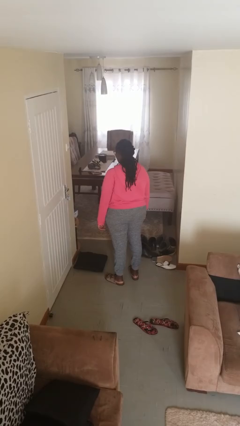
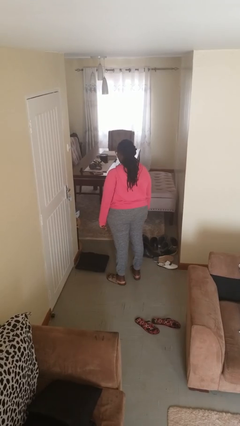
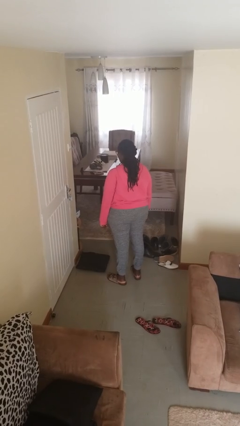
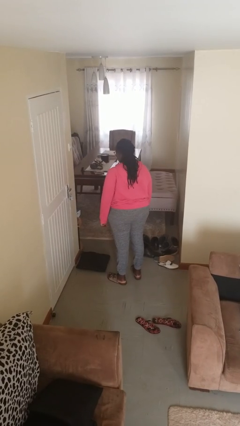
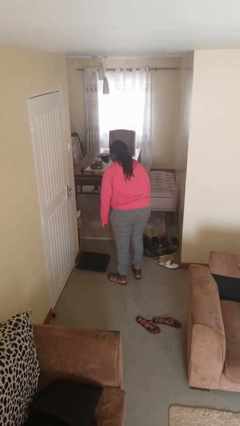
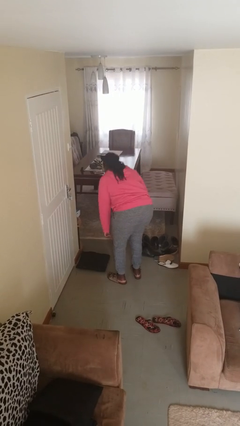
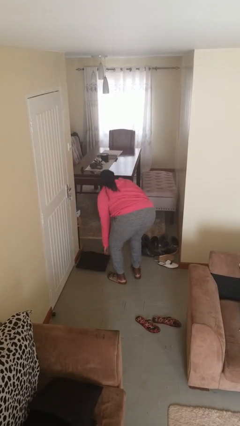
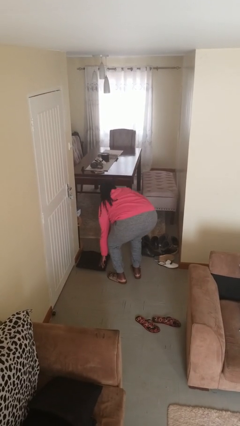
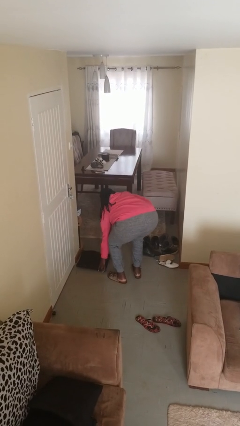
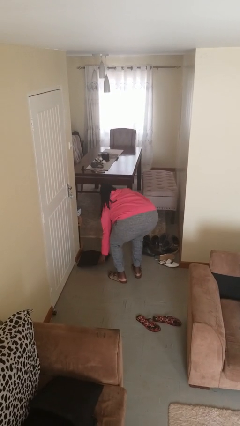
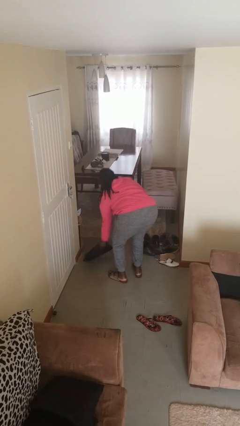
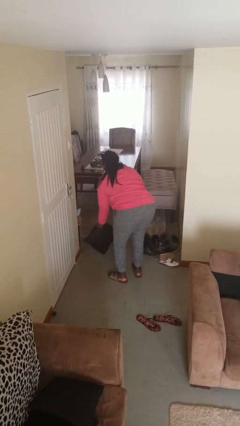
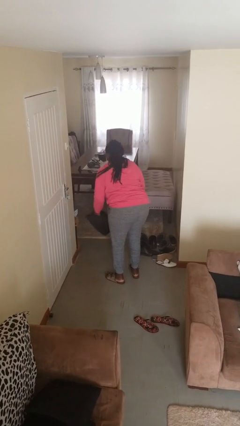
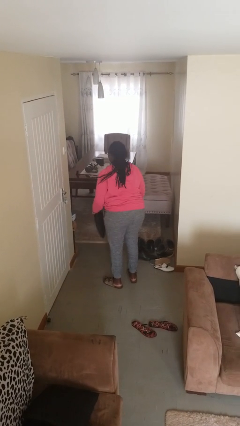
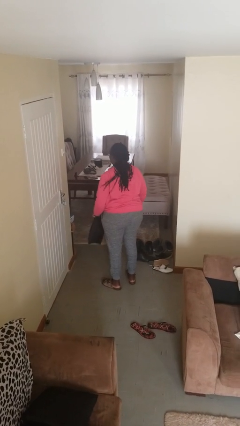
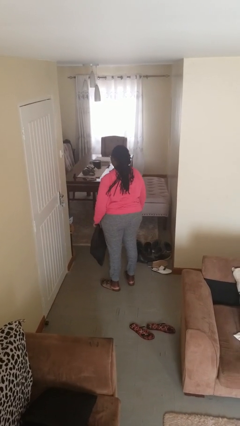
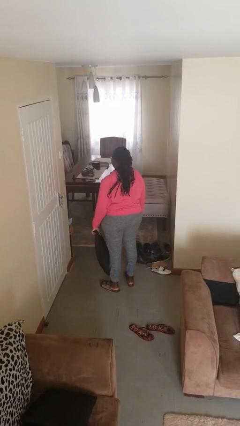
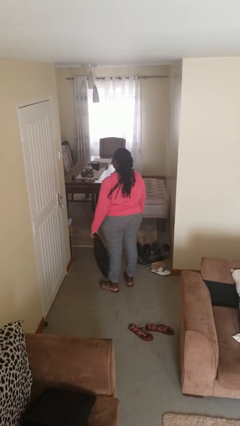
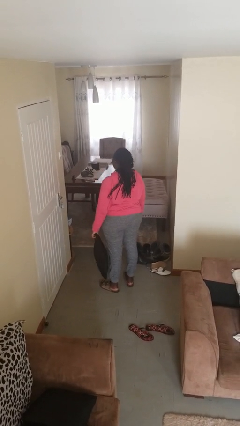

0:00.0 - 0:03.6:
person picks up object from floor

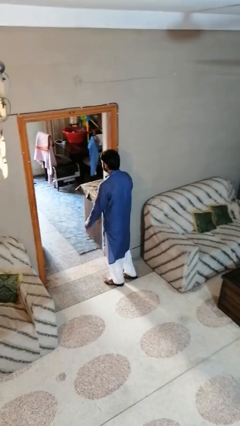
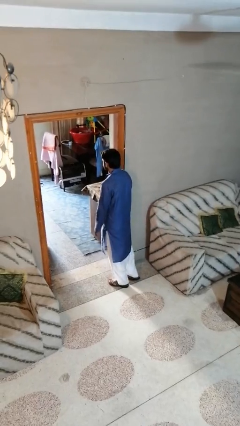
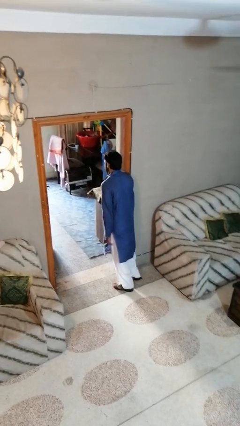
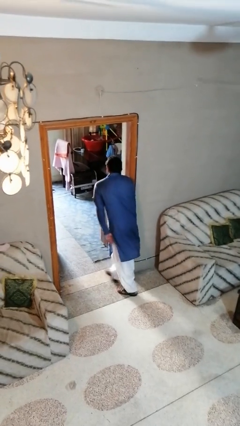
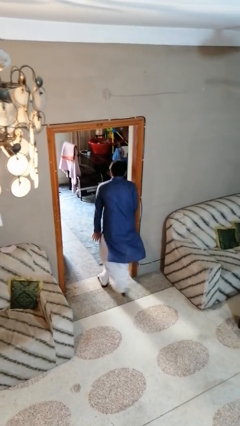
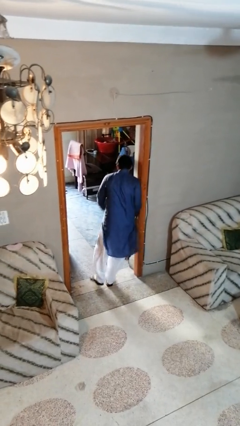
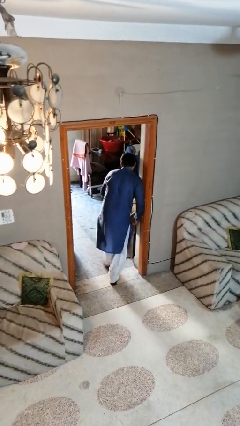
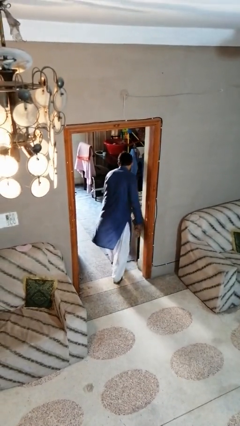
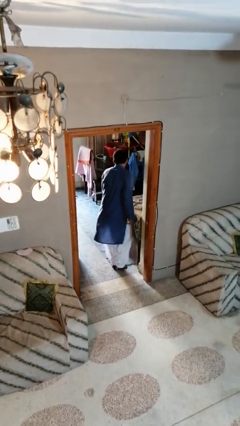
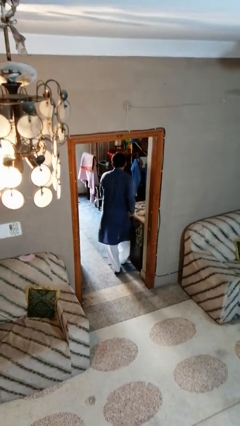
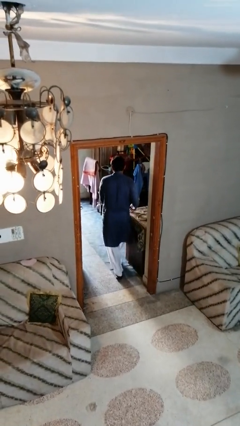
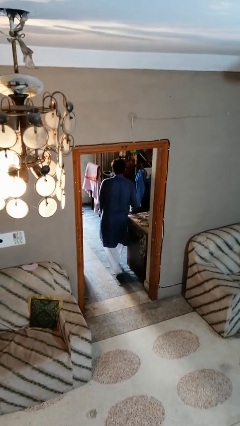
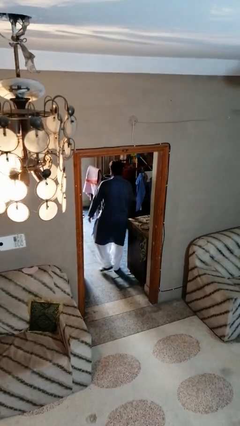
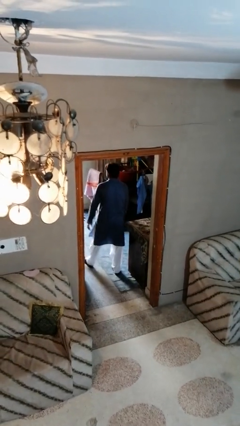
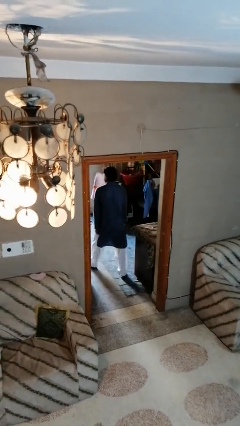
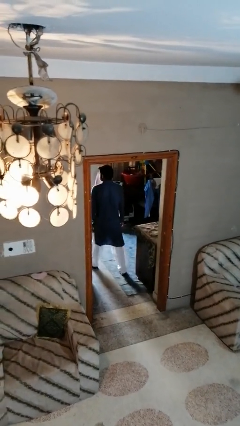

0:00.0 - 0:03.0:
person bumps into wall

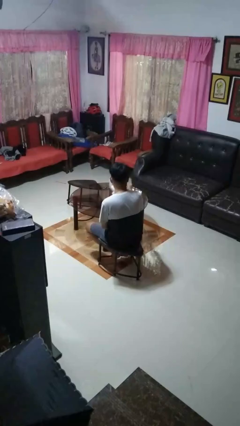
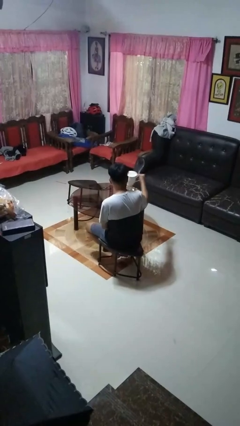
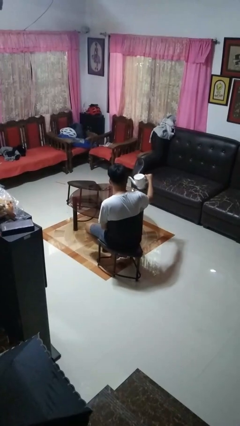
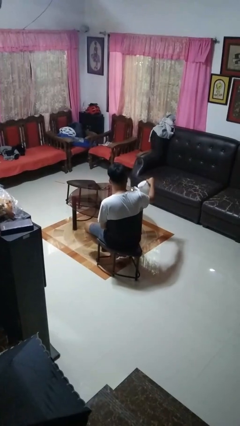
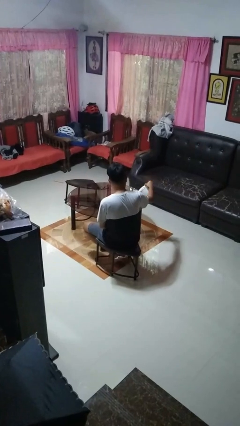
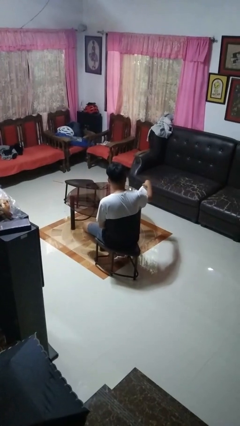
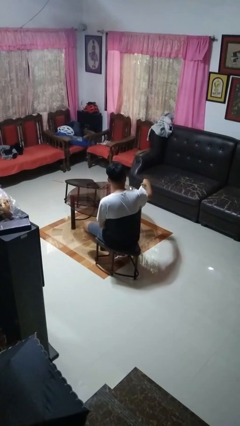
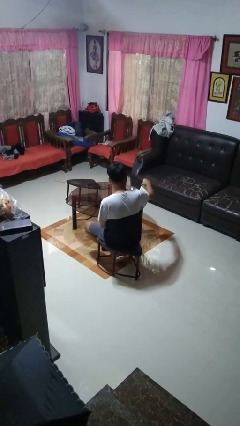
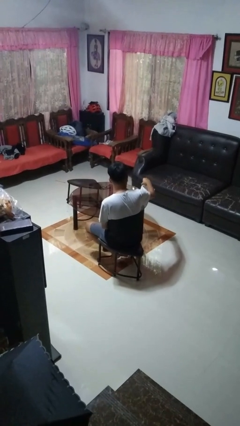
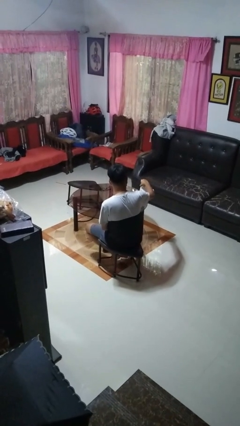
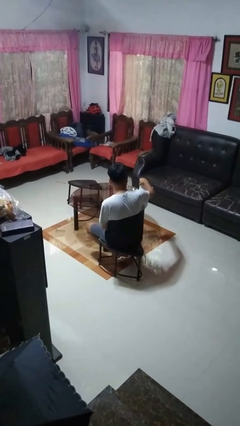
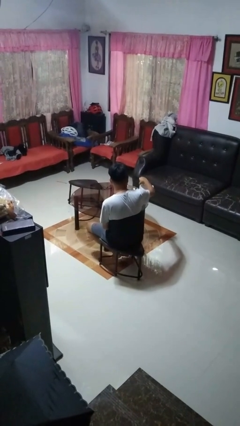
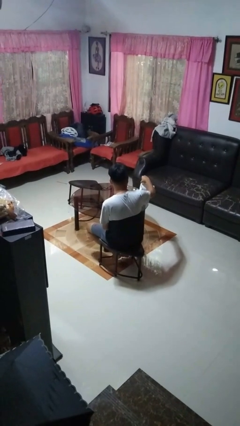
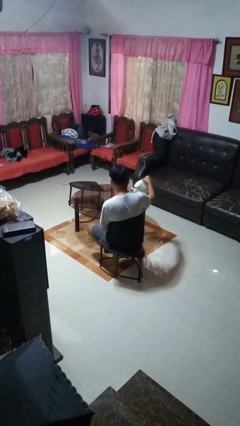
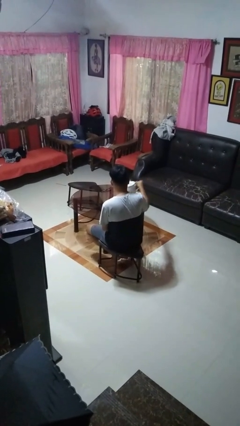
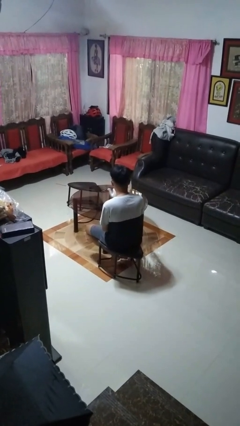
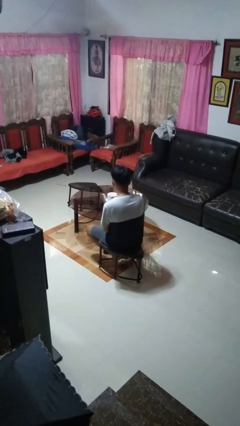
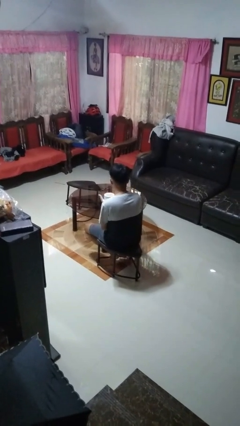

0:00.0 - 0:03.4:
person pours coffee into mug

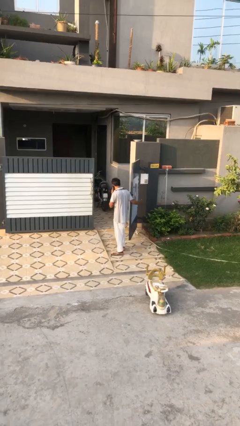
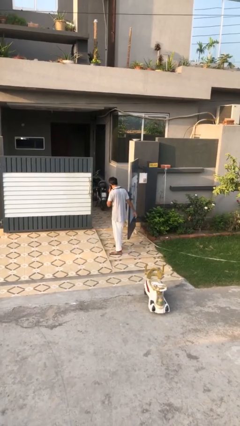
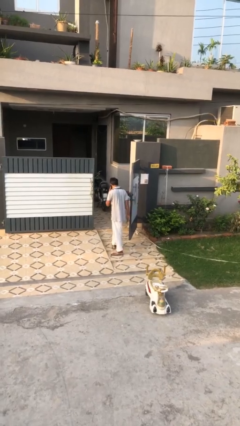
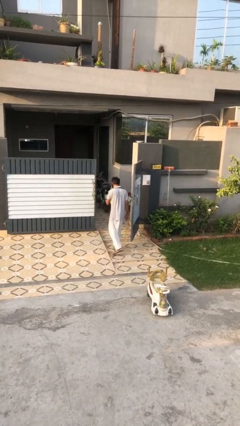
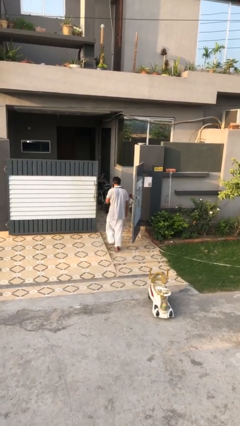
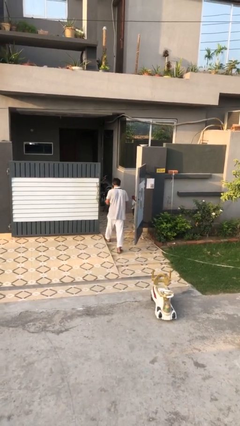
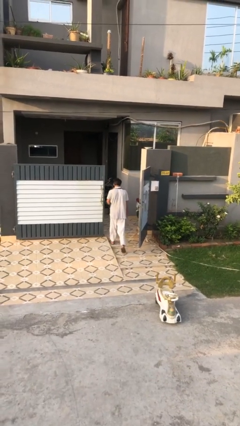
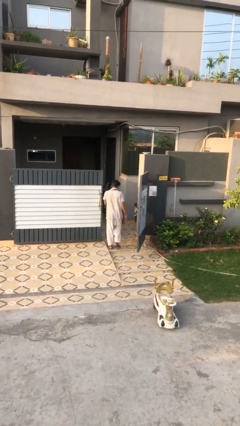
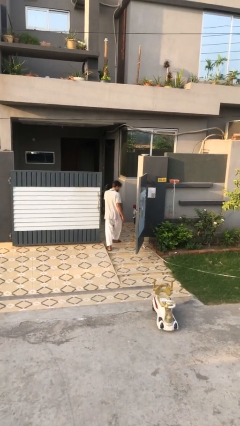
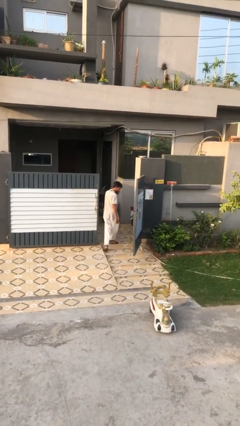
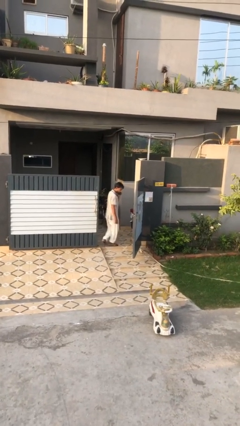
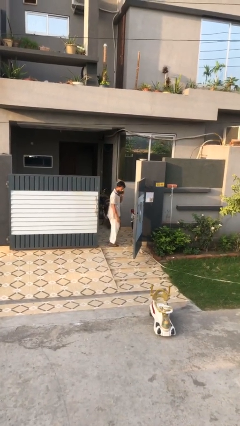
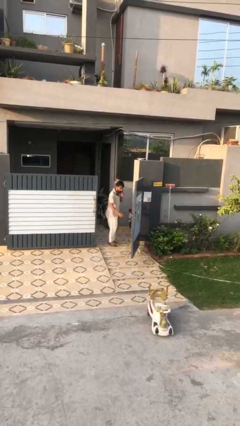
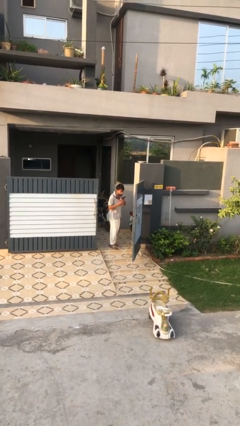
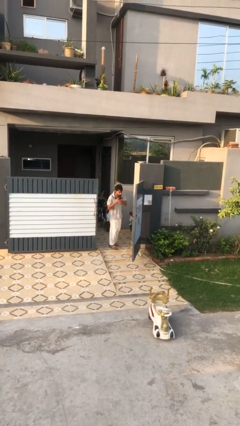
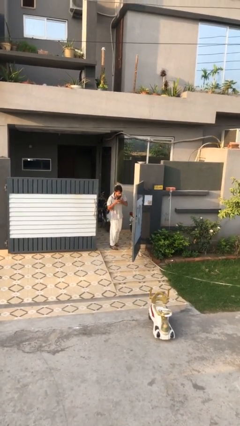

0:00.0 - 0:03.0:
person exits scene through structure

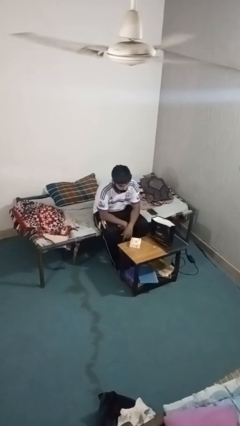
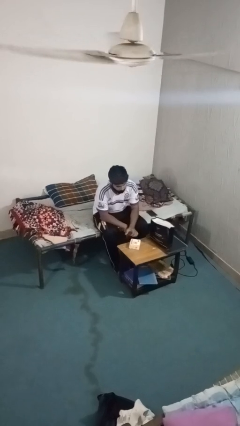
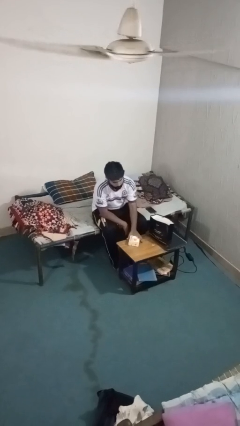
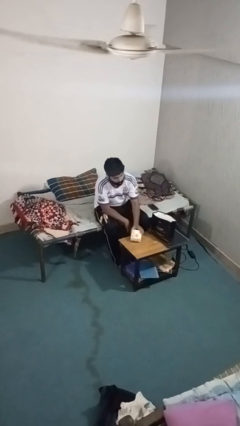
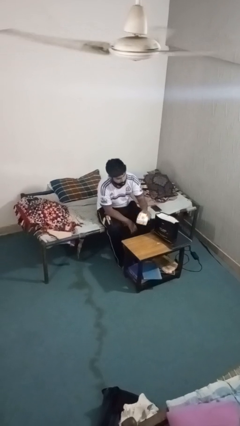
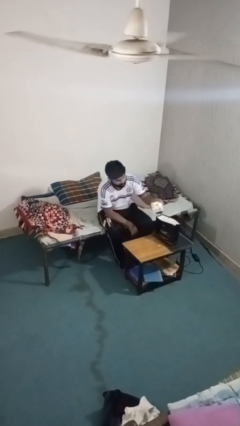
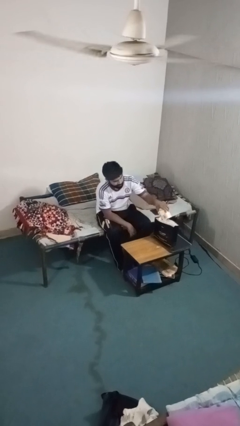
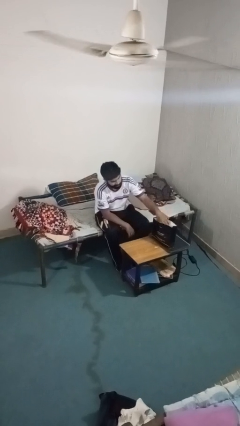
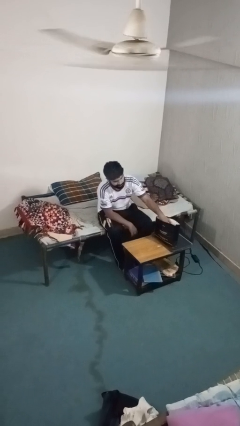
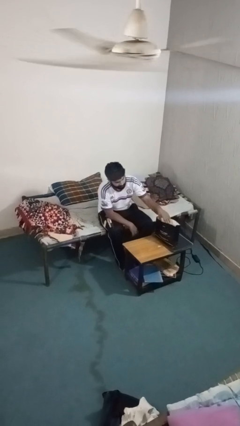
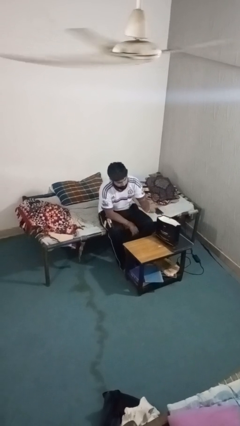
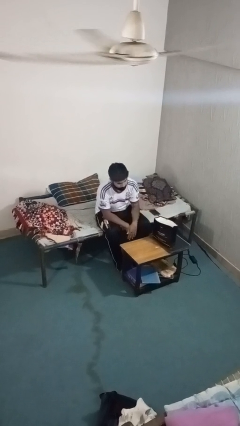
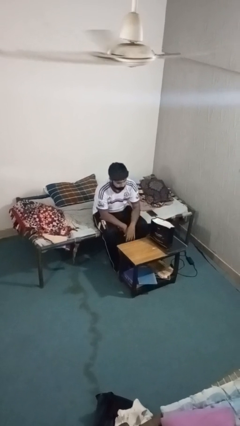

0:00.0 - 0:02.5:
person puts object into bag

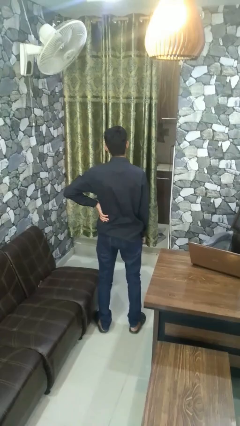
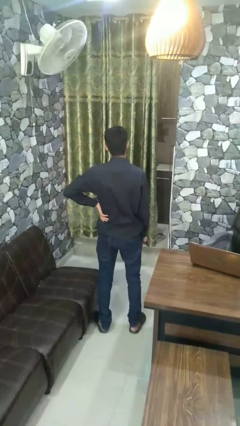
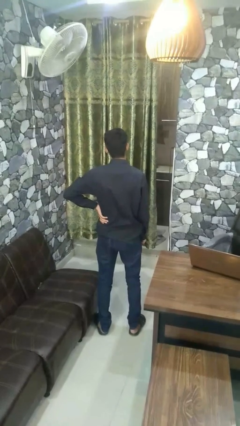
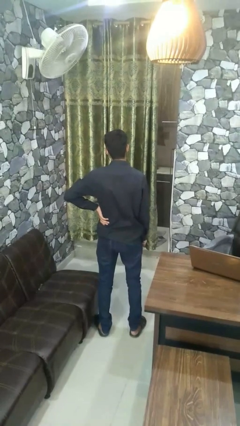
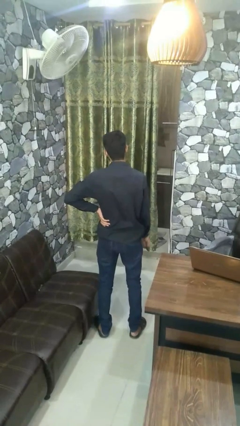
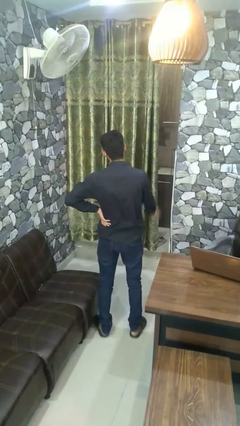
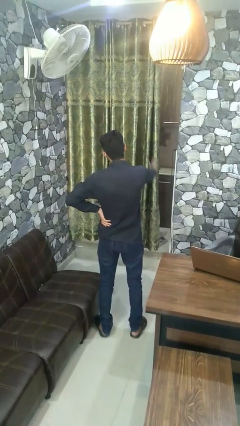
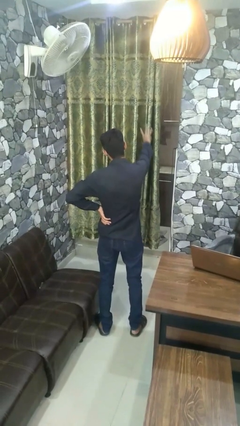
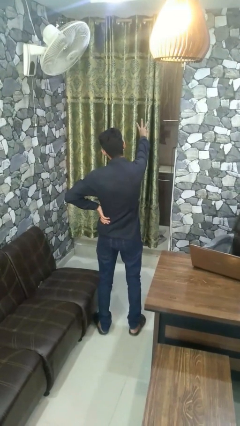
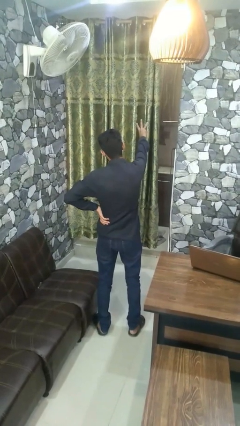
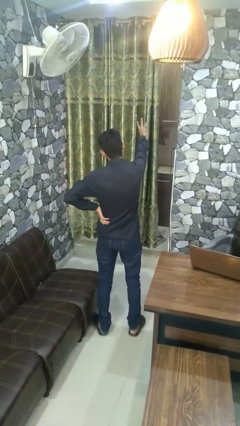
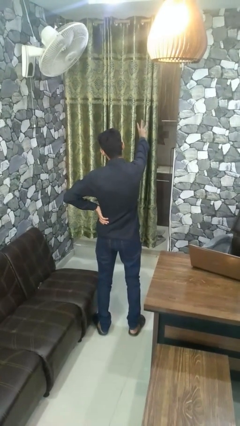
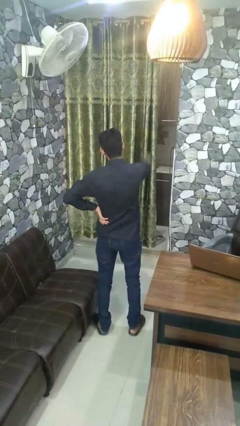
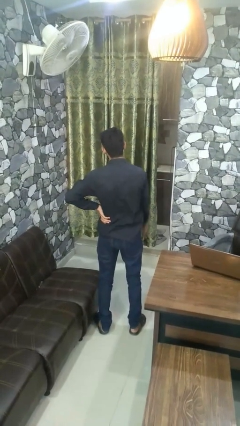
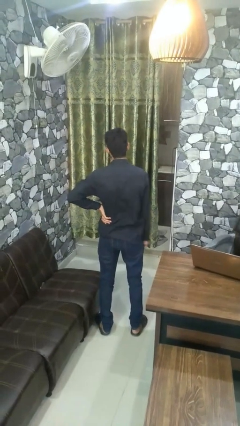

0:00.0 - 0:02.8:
person gestures number three
